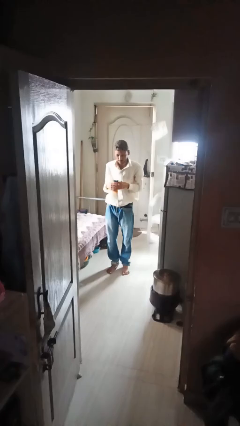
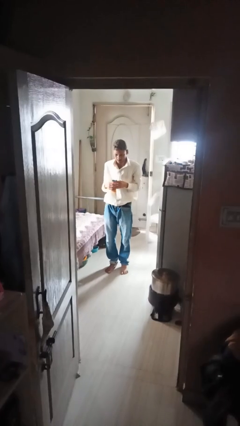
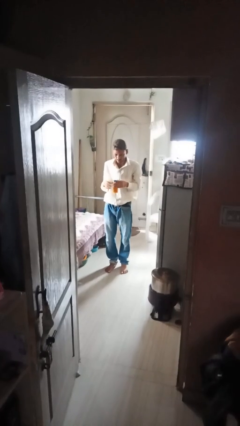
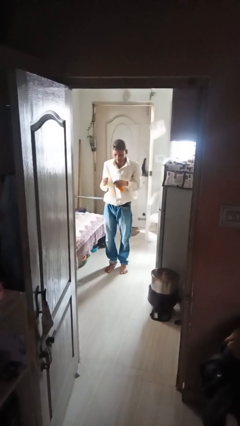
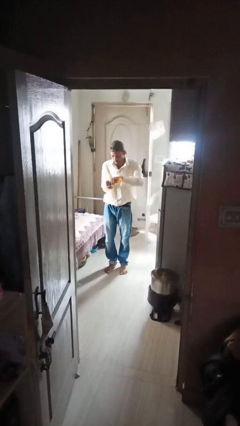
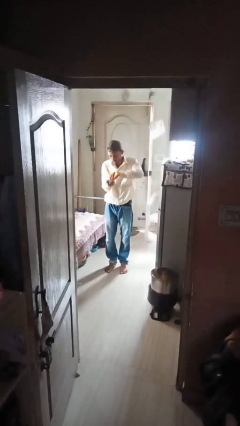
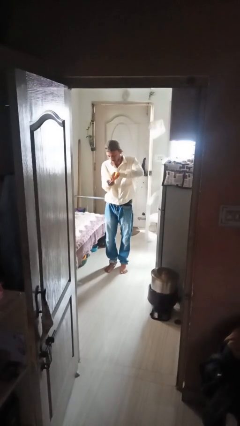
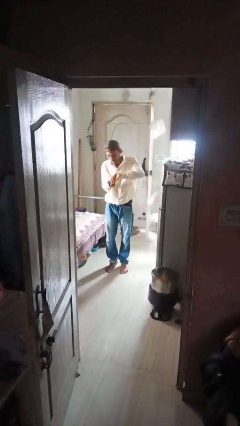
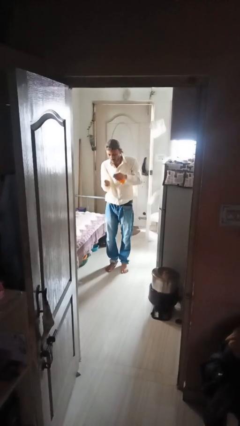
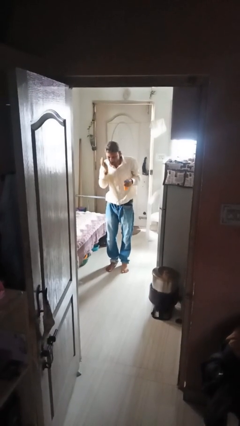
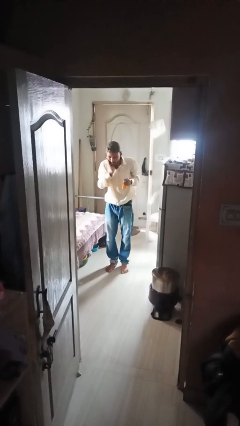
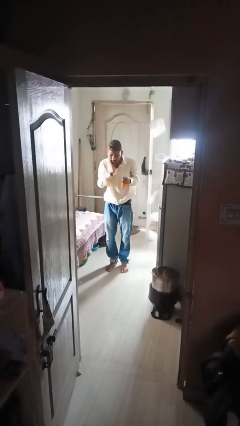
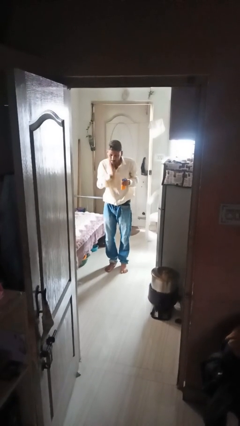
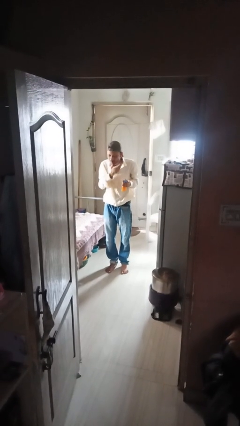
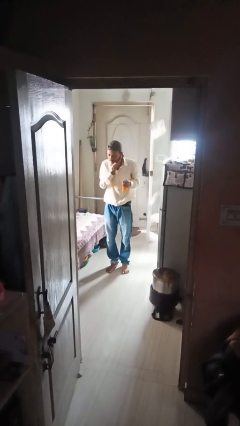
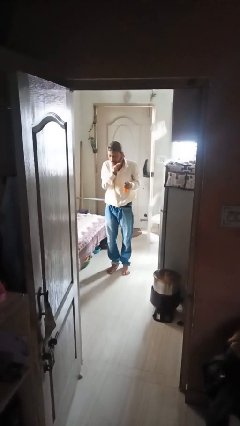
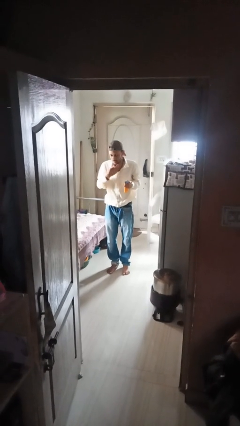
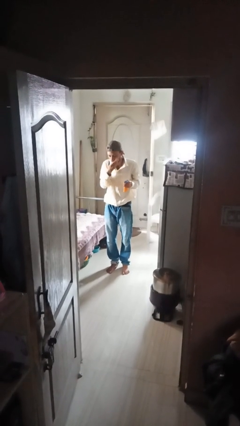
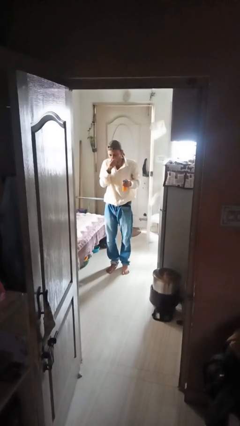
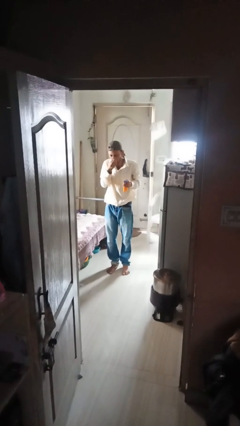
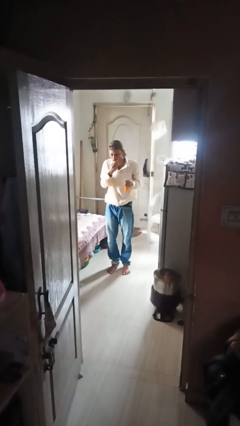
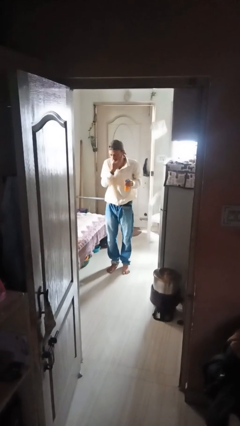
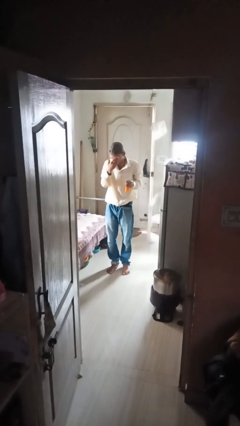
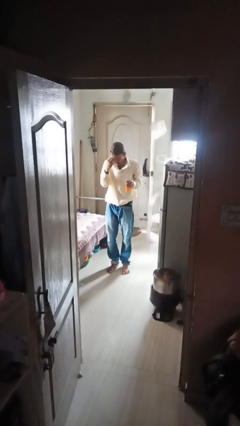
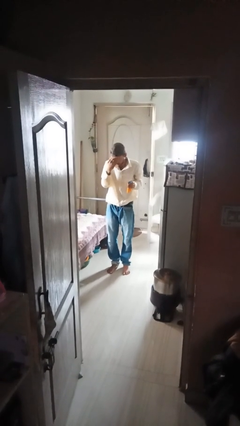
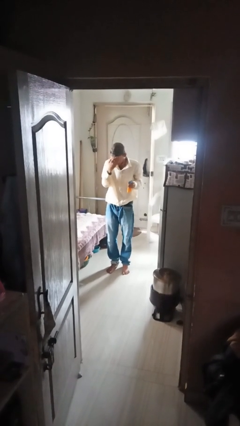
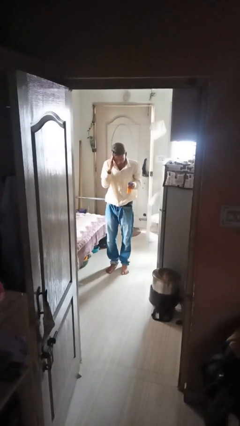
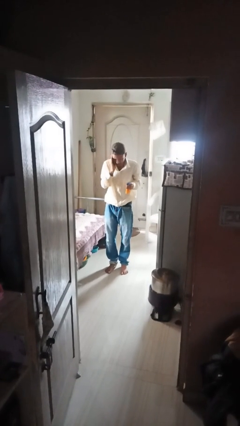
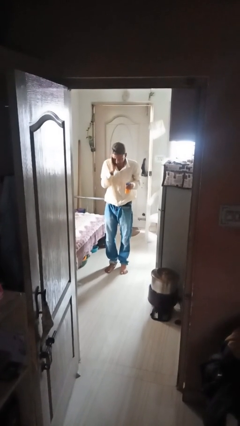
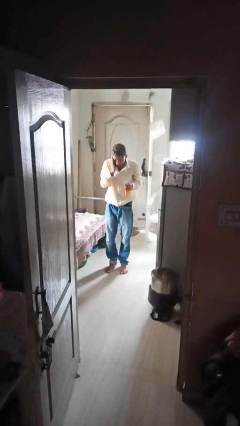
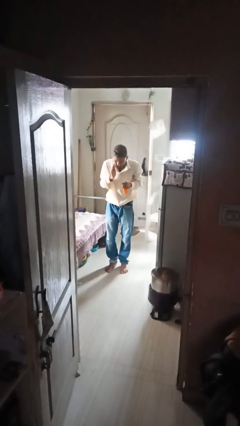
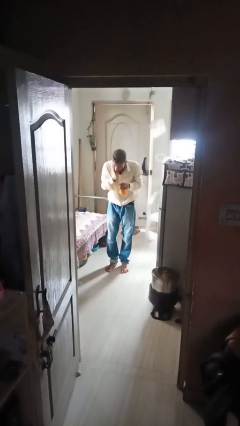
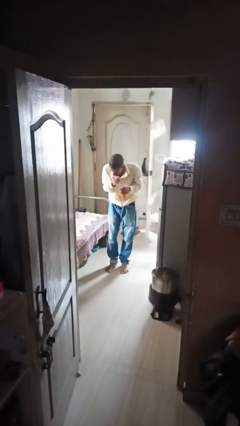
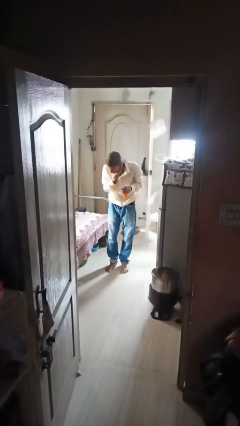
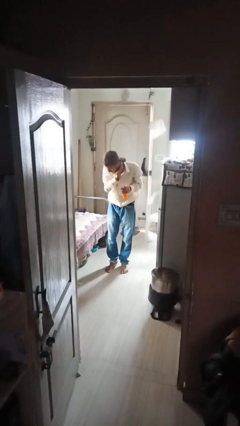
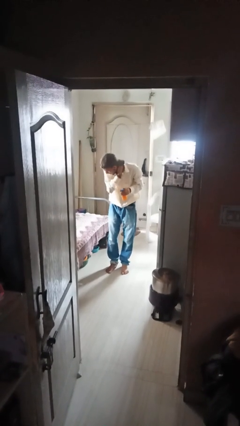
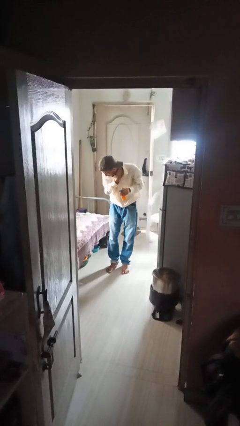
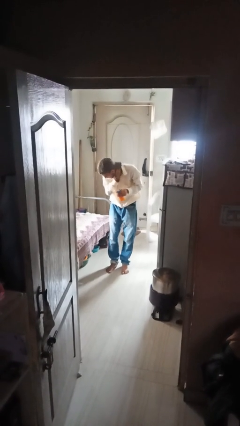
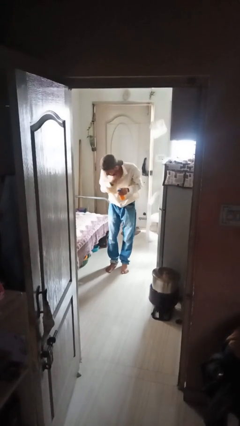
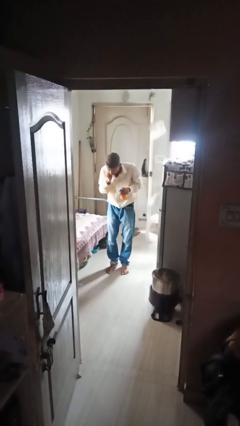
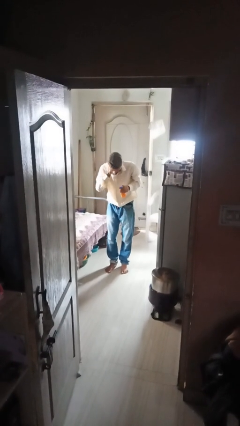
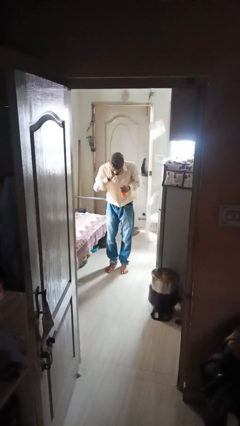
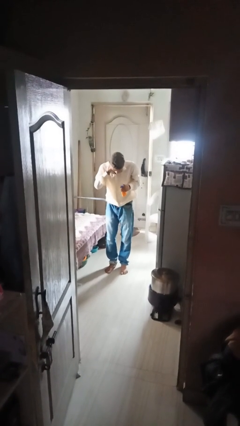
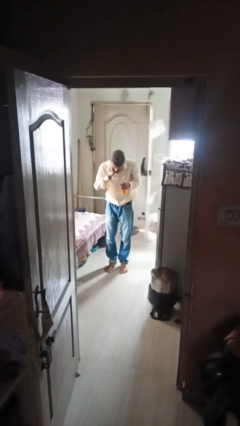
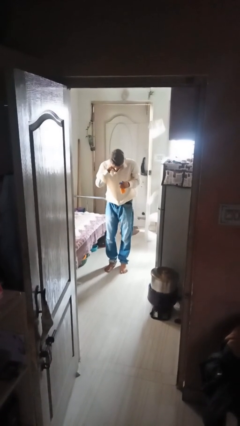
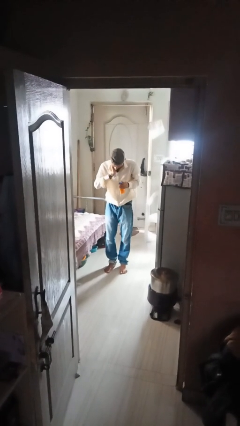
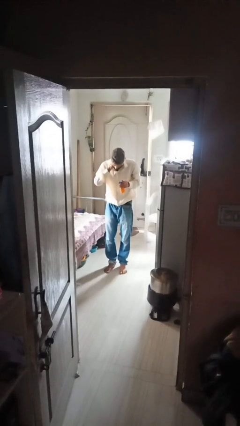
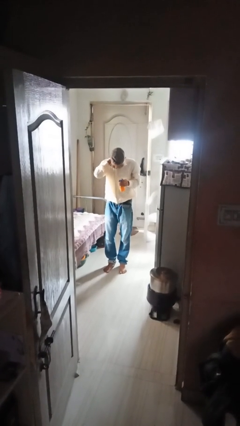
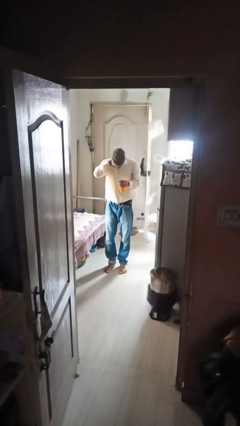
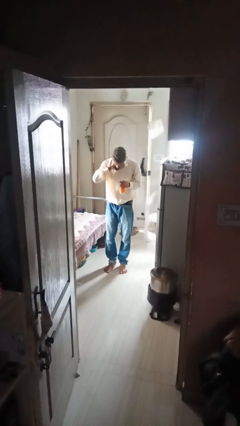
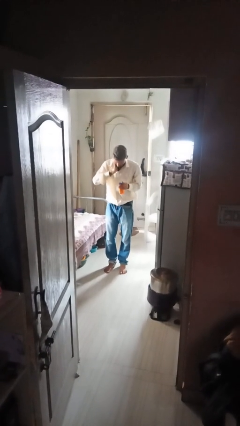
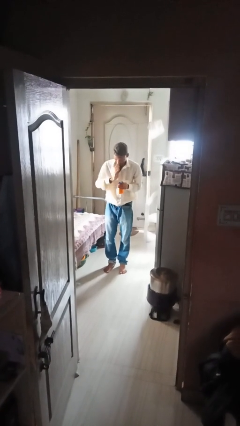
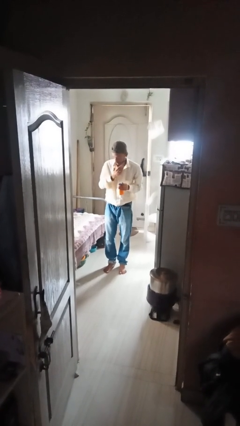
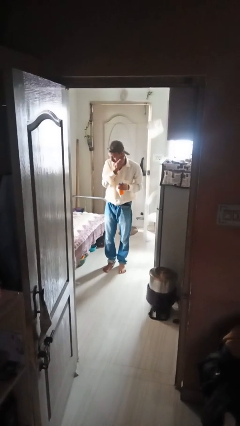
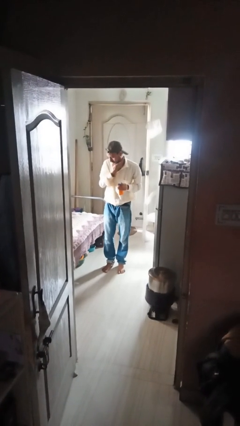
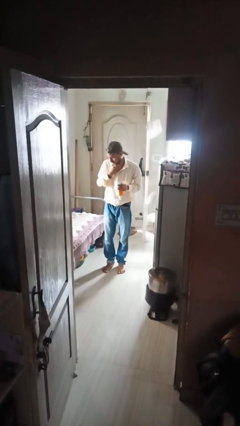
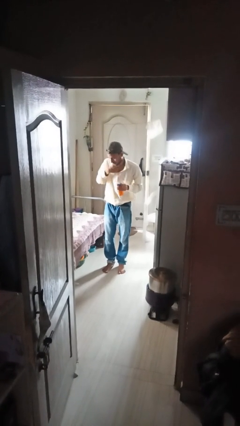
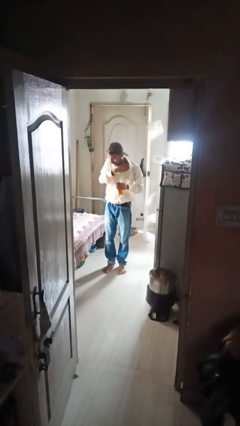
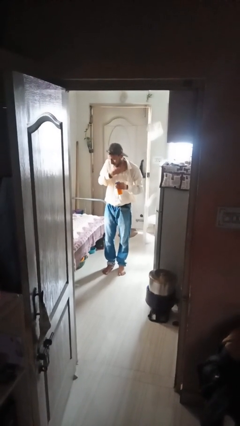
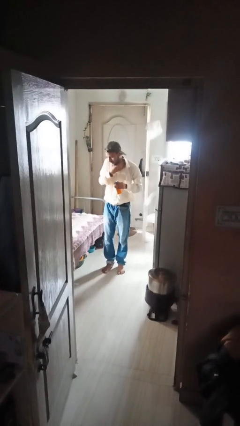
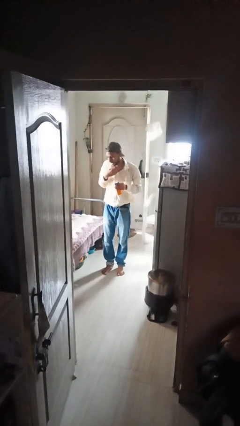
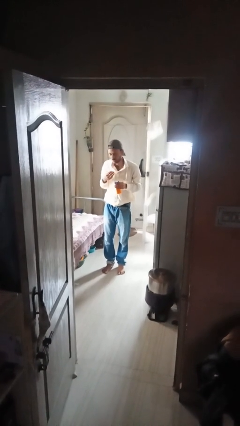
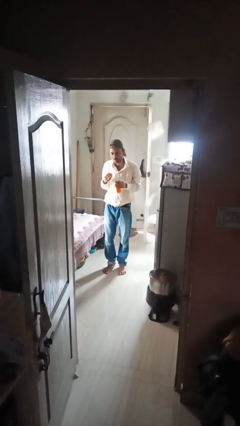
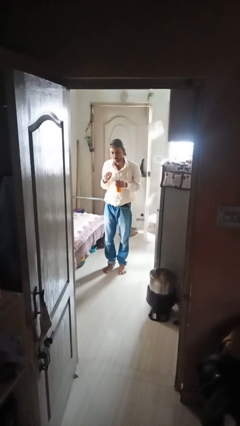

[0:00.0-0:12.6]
person applies sunscreen

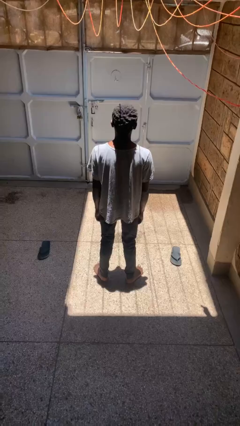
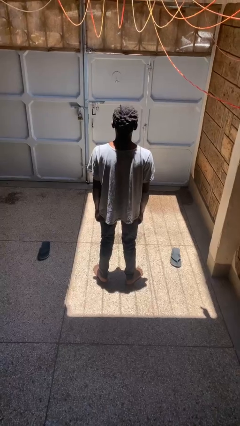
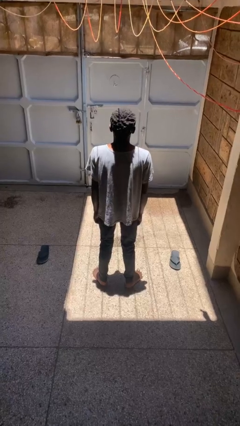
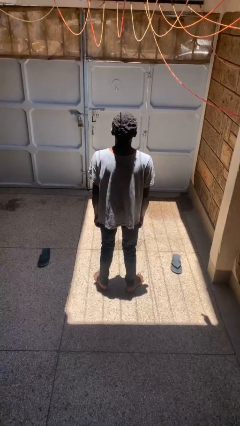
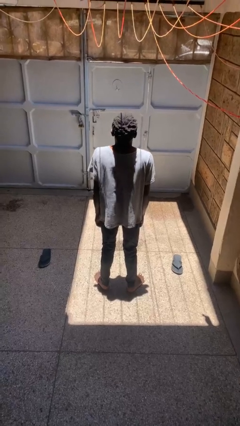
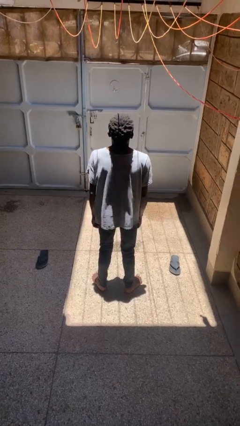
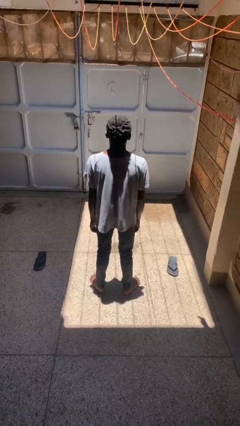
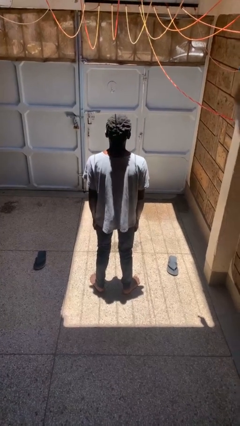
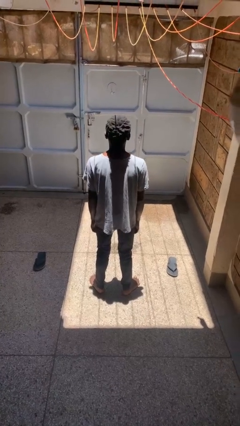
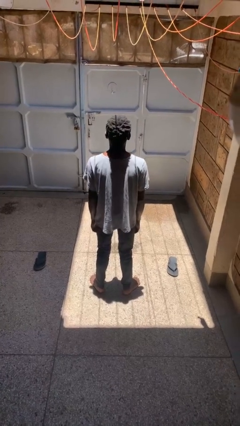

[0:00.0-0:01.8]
person shrugs

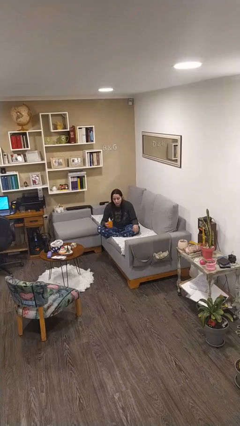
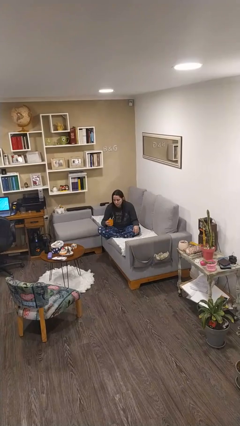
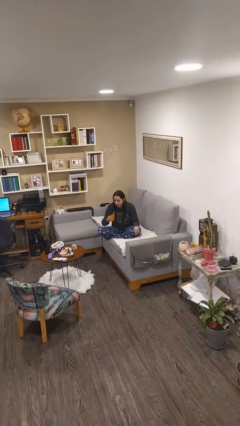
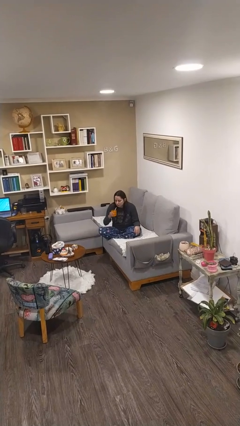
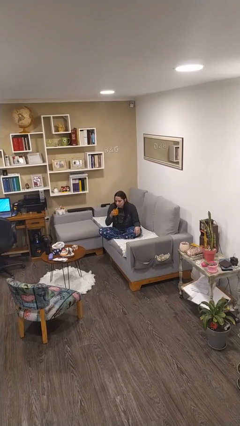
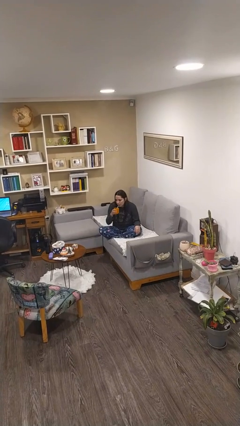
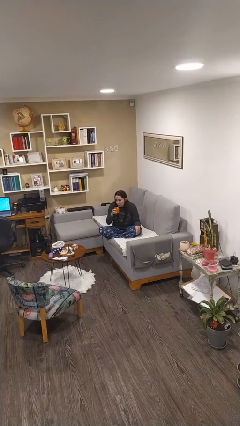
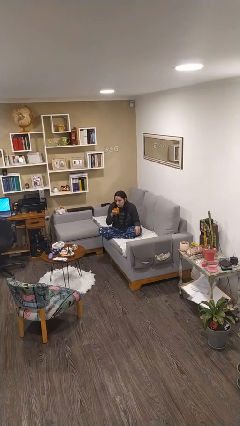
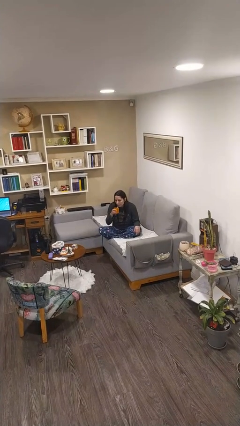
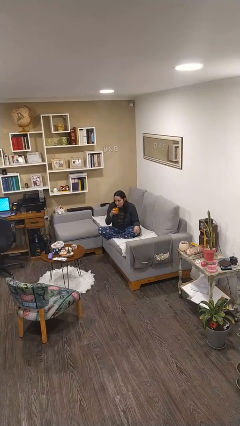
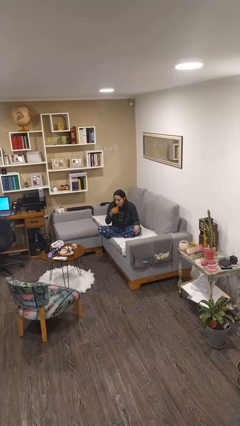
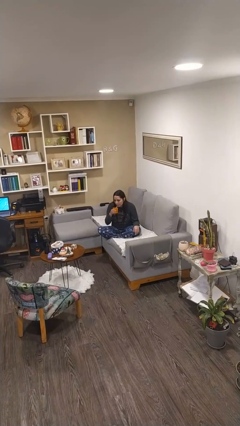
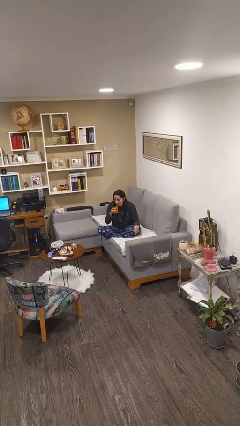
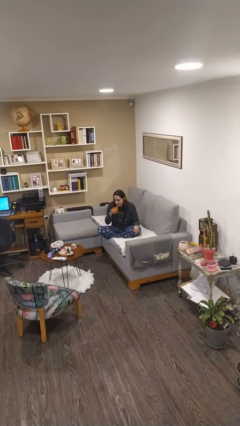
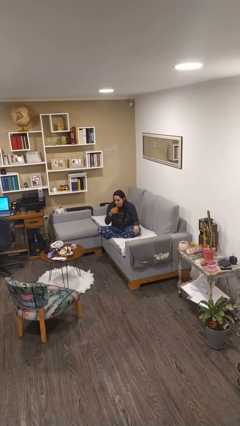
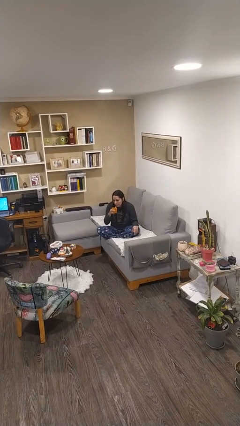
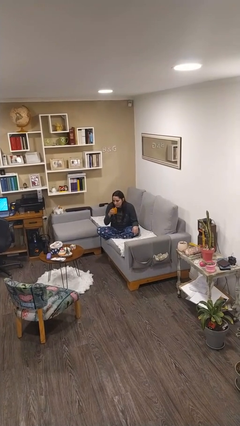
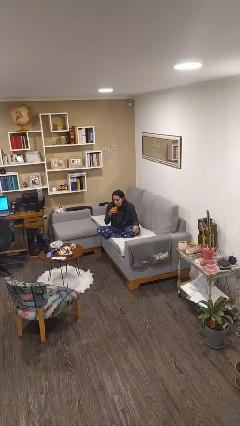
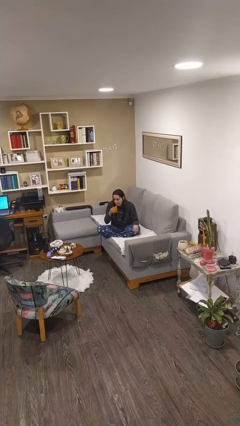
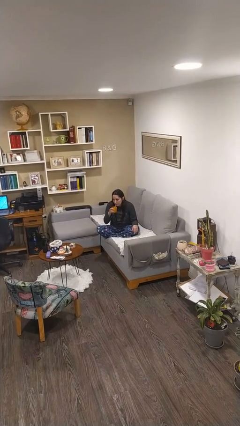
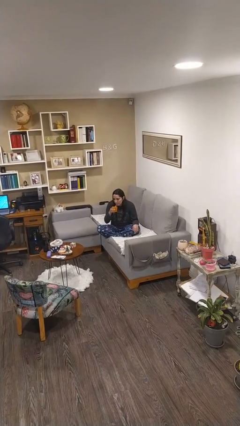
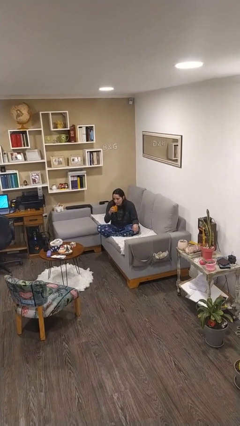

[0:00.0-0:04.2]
person drinks from straw
